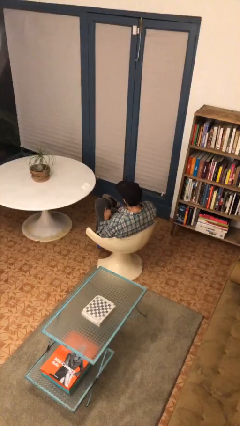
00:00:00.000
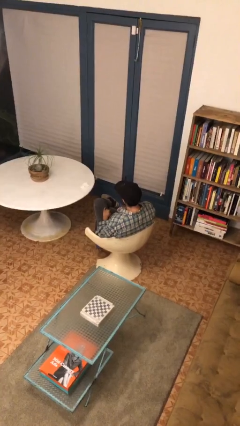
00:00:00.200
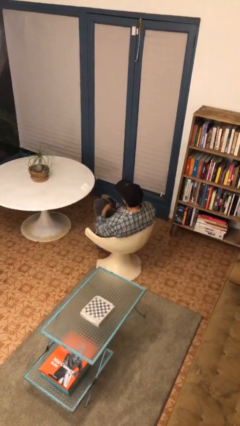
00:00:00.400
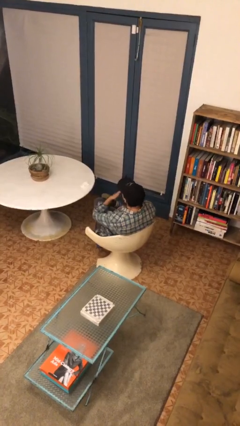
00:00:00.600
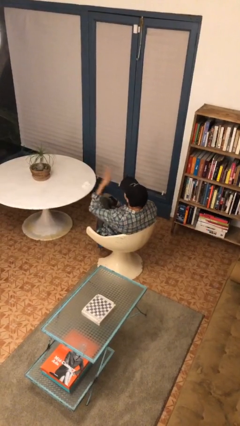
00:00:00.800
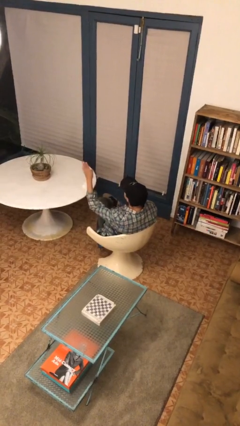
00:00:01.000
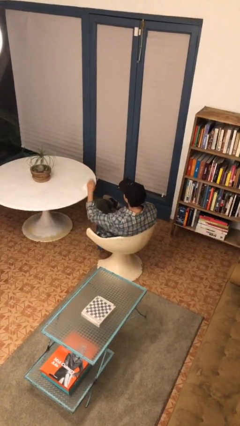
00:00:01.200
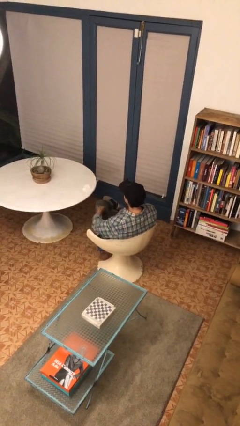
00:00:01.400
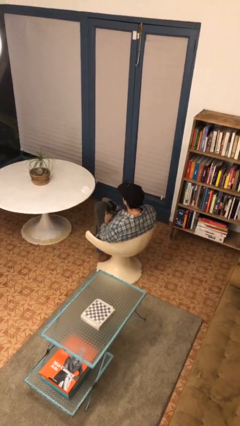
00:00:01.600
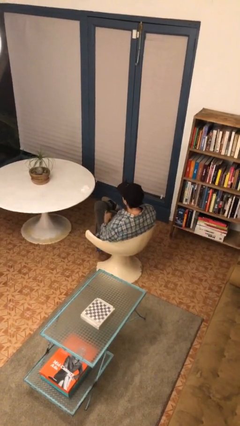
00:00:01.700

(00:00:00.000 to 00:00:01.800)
person gestures blow kiss

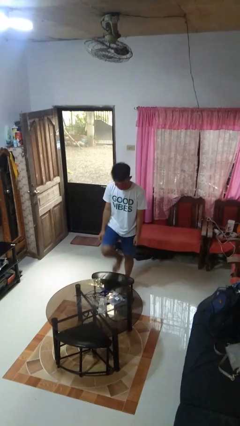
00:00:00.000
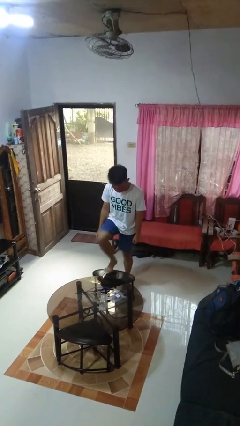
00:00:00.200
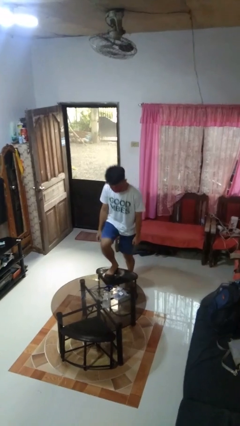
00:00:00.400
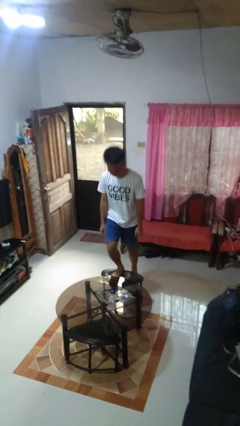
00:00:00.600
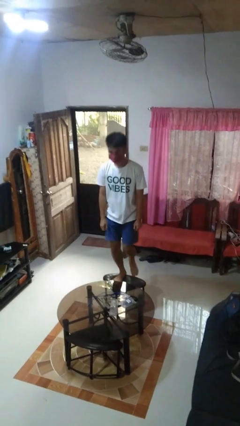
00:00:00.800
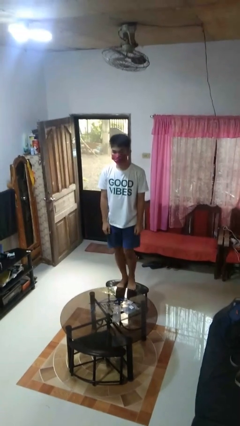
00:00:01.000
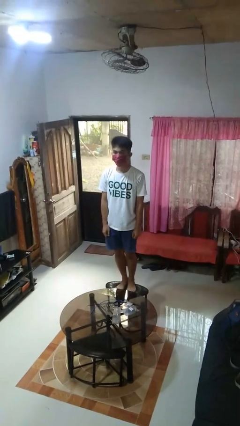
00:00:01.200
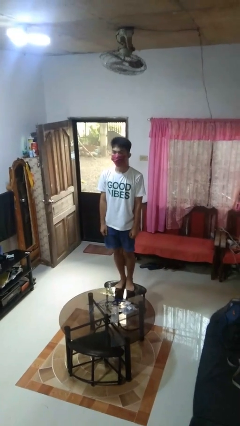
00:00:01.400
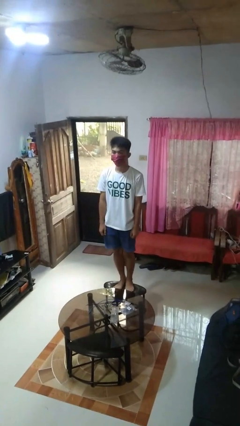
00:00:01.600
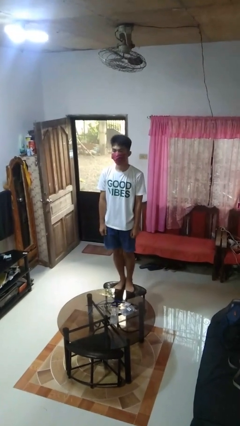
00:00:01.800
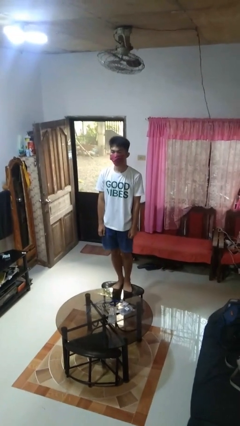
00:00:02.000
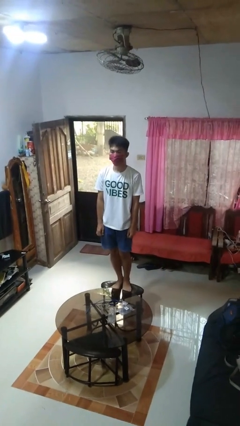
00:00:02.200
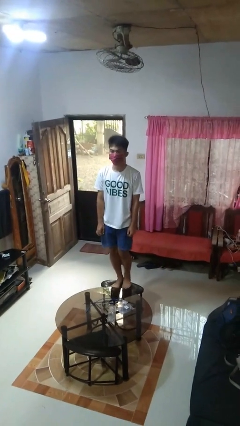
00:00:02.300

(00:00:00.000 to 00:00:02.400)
person climbs on chair

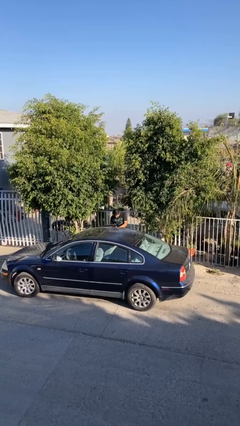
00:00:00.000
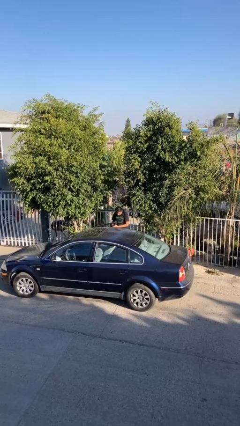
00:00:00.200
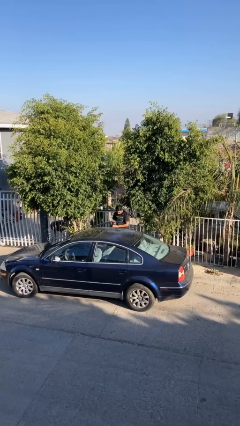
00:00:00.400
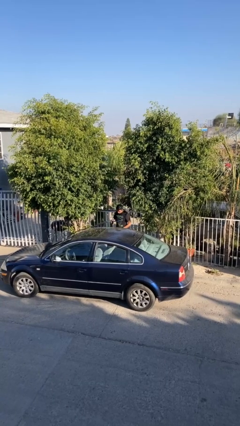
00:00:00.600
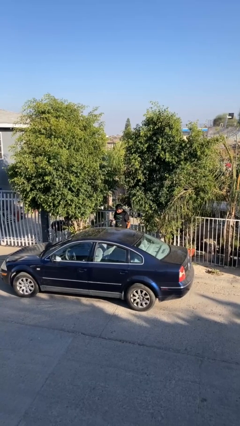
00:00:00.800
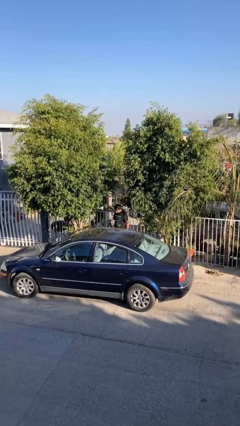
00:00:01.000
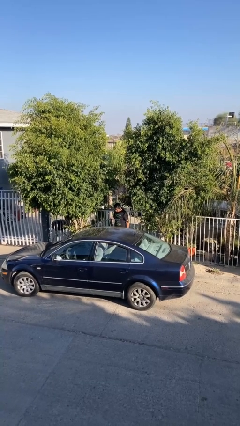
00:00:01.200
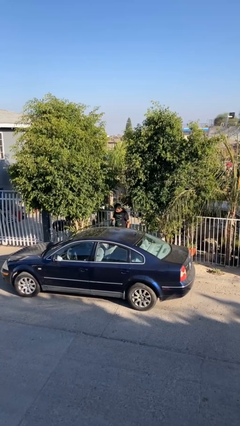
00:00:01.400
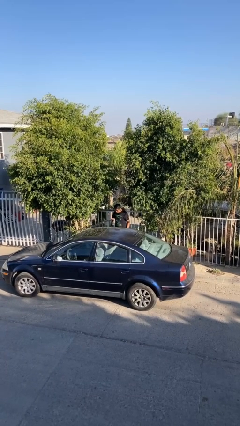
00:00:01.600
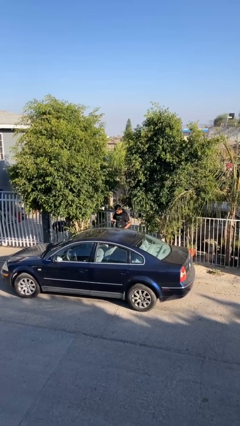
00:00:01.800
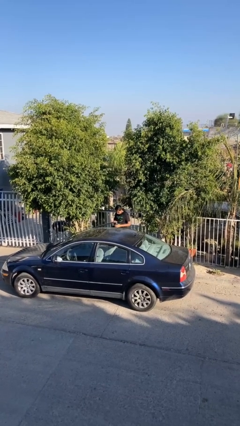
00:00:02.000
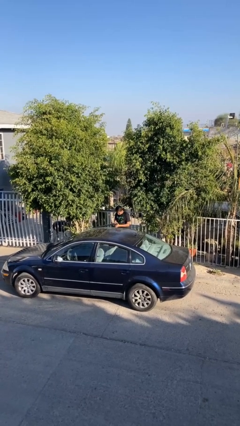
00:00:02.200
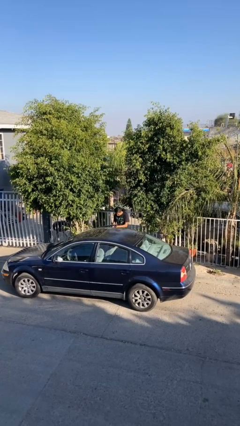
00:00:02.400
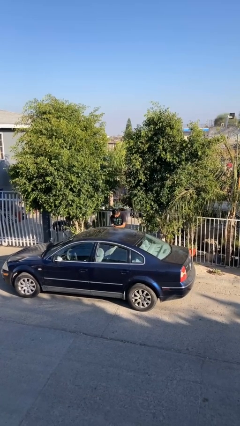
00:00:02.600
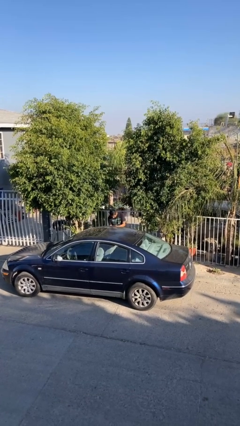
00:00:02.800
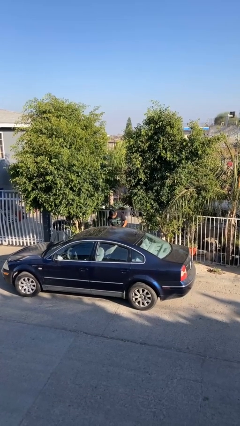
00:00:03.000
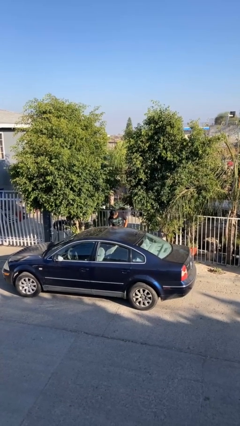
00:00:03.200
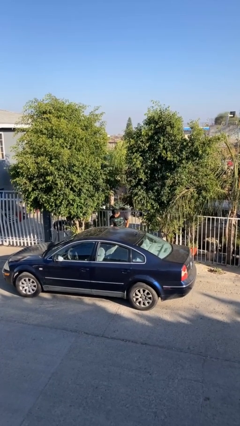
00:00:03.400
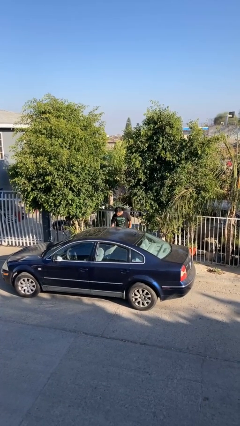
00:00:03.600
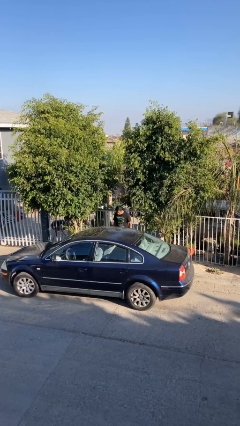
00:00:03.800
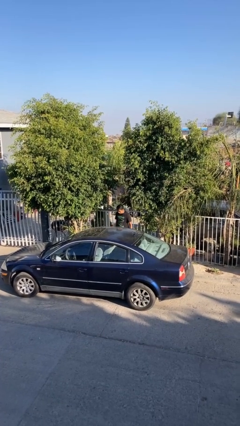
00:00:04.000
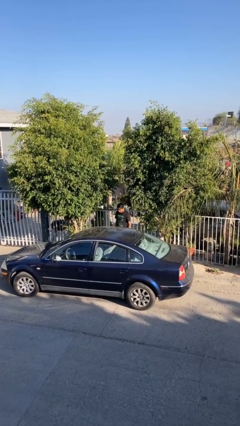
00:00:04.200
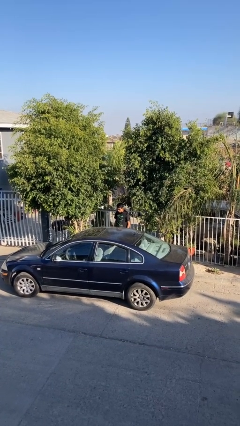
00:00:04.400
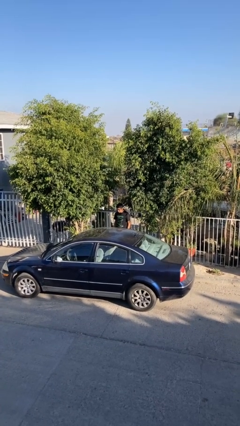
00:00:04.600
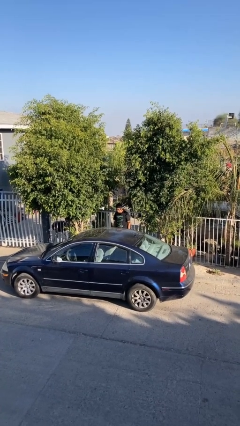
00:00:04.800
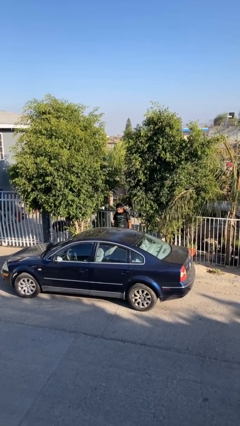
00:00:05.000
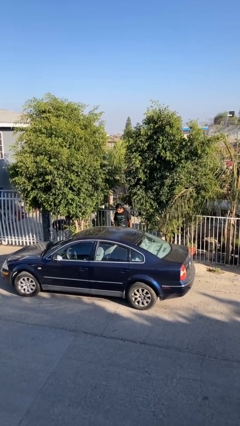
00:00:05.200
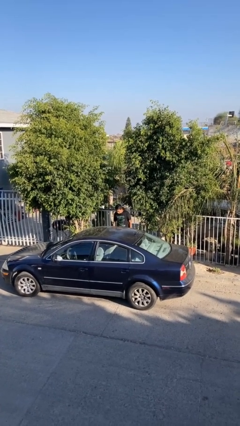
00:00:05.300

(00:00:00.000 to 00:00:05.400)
person opens car door

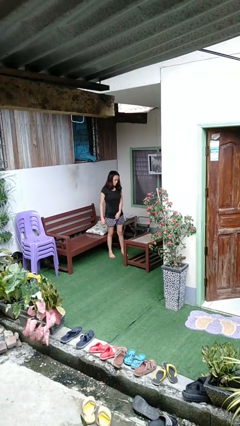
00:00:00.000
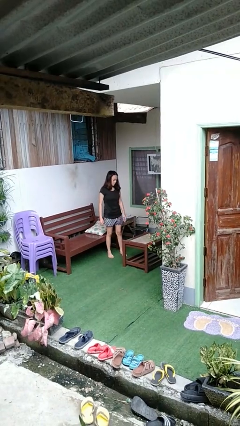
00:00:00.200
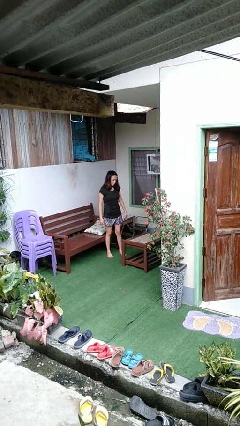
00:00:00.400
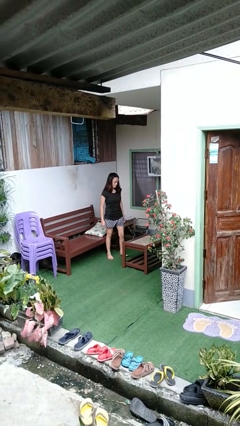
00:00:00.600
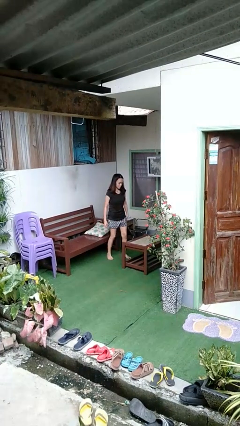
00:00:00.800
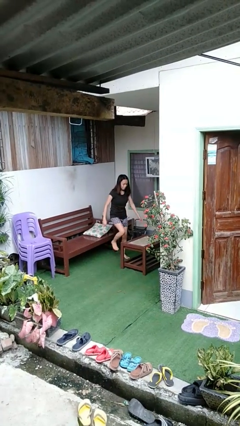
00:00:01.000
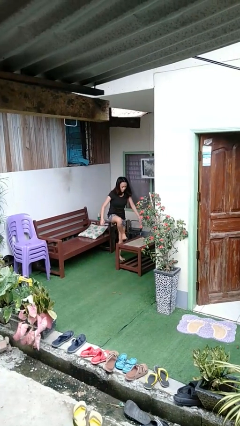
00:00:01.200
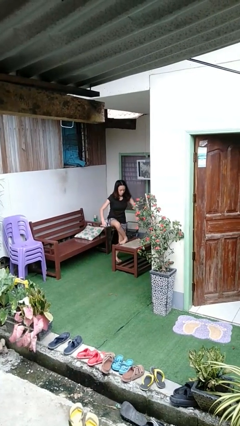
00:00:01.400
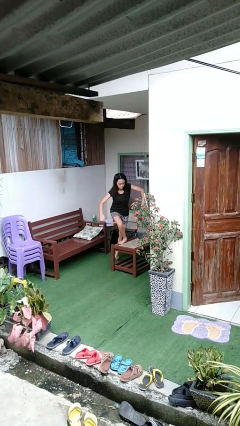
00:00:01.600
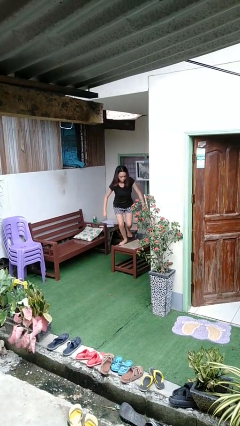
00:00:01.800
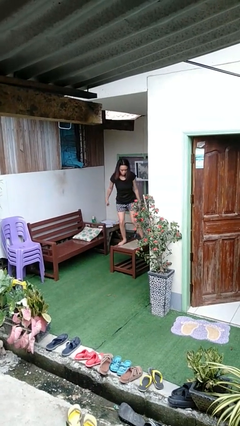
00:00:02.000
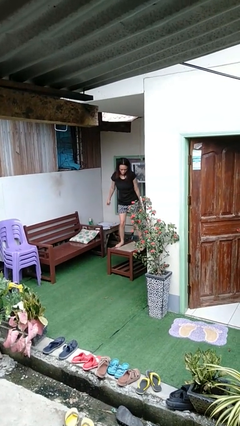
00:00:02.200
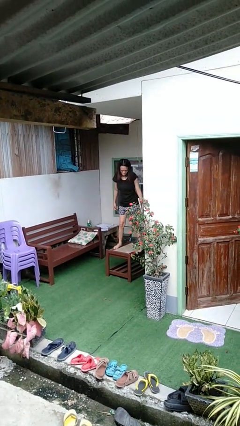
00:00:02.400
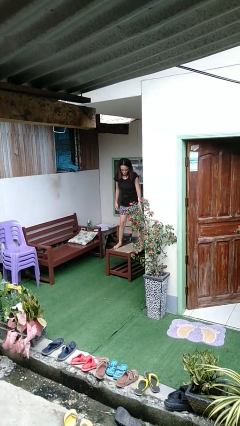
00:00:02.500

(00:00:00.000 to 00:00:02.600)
person climbs on table

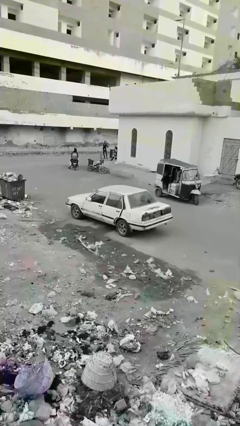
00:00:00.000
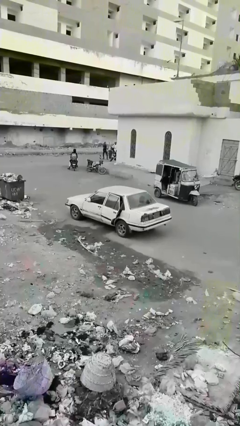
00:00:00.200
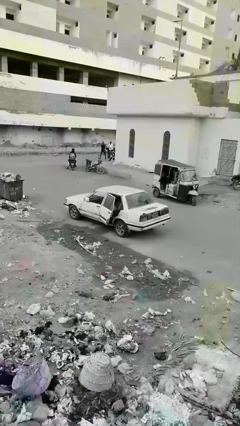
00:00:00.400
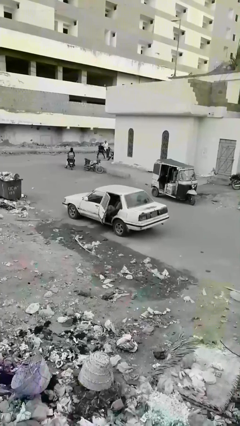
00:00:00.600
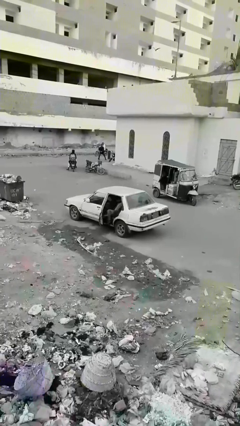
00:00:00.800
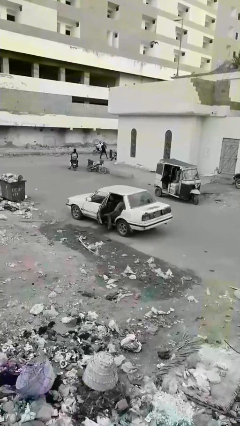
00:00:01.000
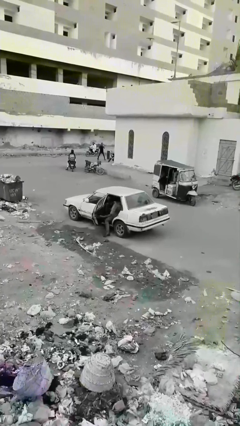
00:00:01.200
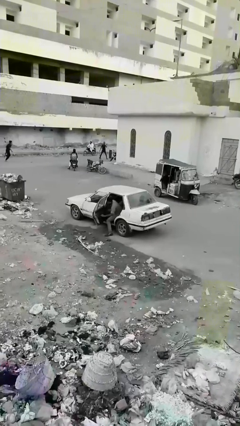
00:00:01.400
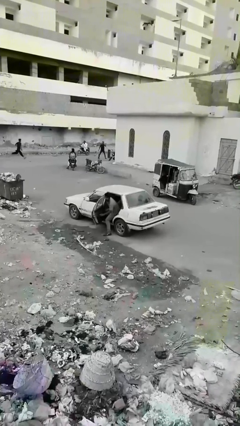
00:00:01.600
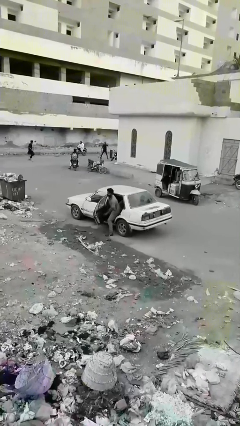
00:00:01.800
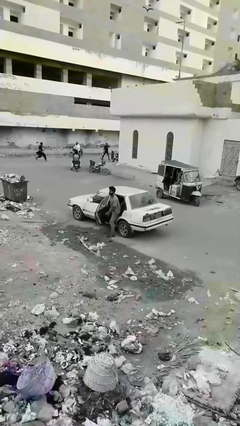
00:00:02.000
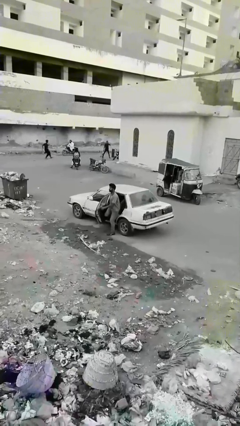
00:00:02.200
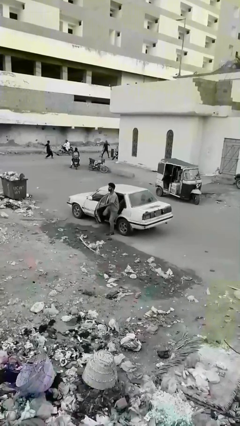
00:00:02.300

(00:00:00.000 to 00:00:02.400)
car drops off person

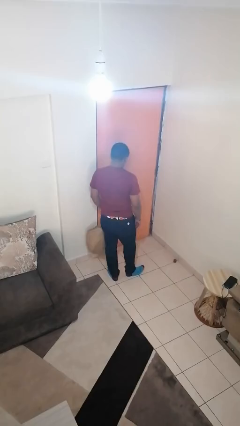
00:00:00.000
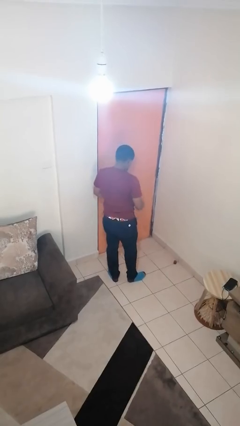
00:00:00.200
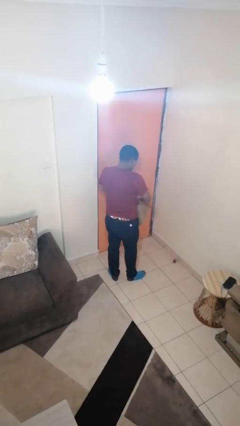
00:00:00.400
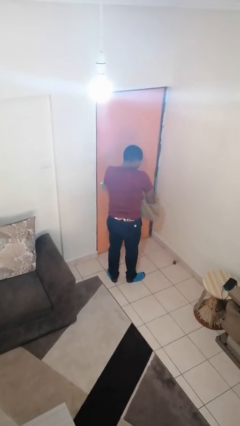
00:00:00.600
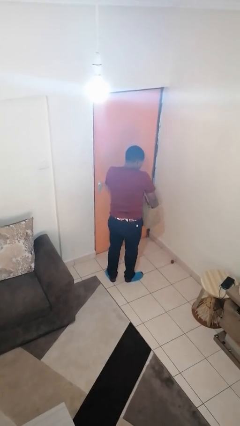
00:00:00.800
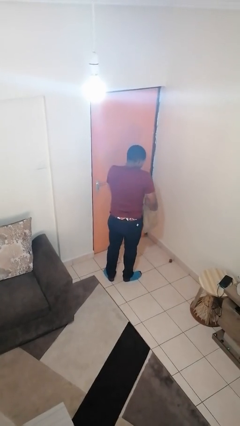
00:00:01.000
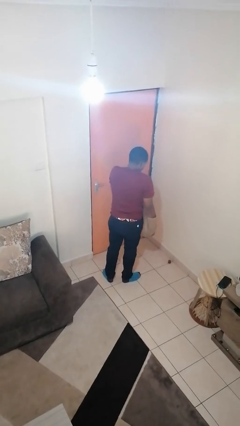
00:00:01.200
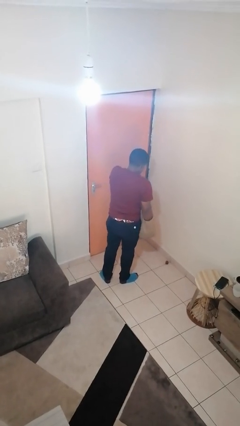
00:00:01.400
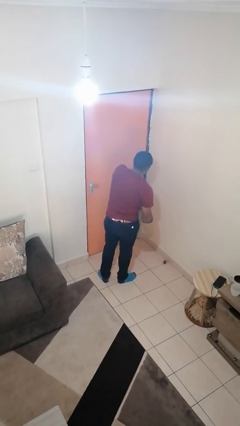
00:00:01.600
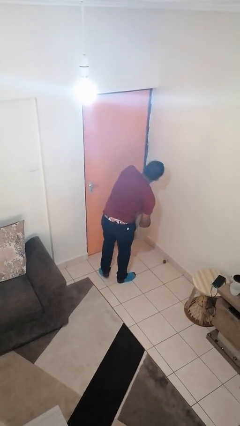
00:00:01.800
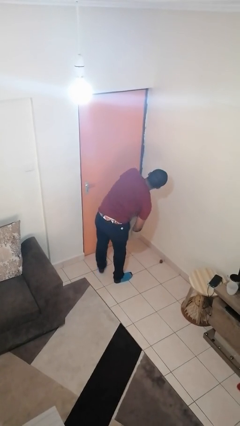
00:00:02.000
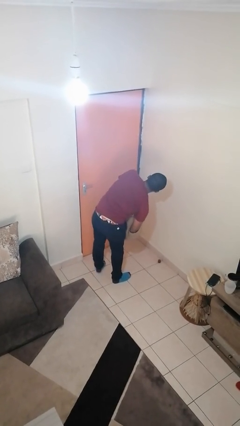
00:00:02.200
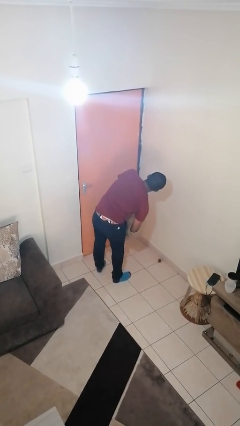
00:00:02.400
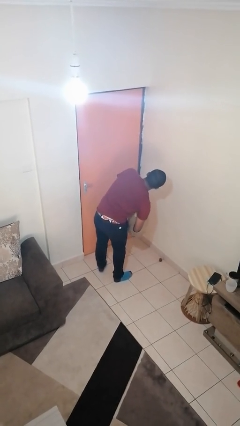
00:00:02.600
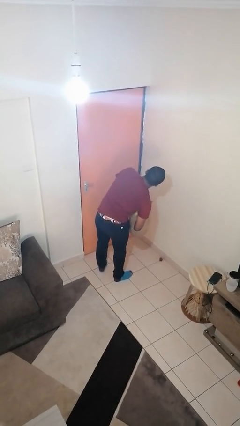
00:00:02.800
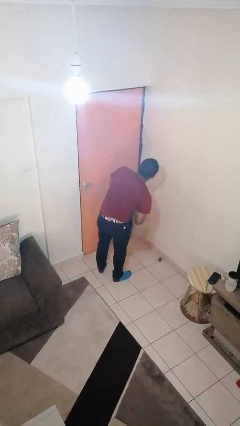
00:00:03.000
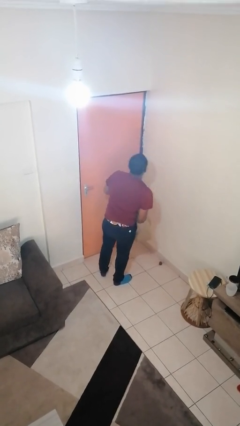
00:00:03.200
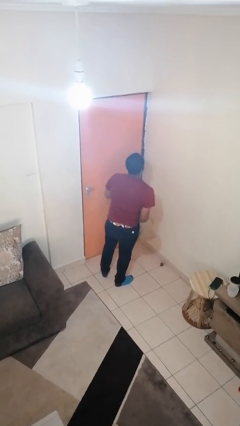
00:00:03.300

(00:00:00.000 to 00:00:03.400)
person searches in bag
